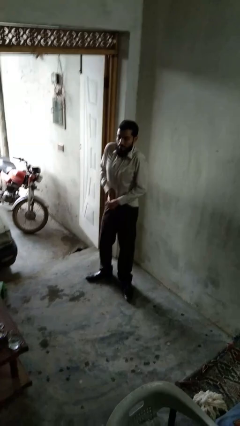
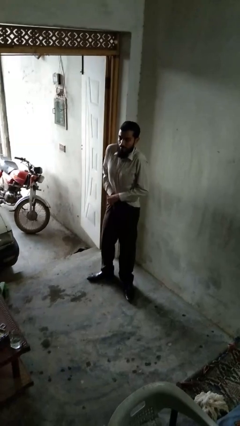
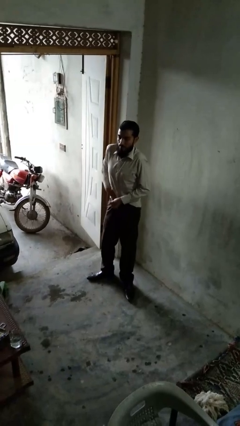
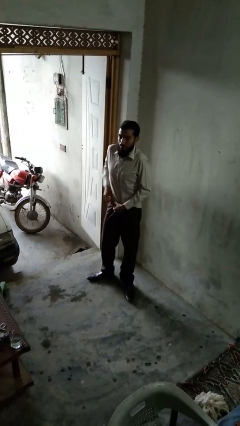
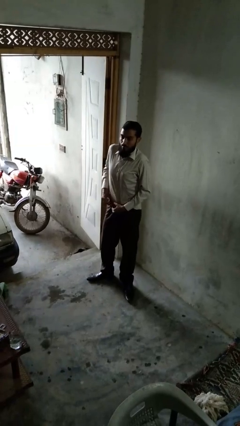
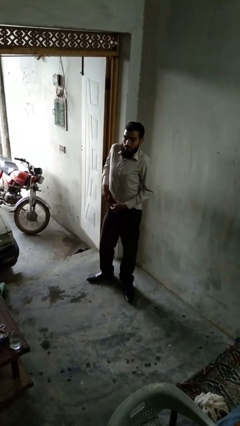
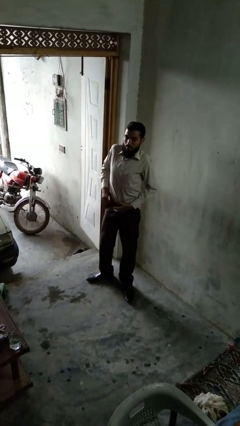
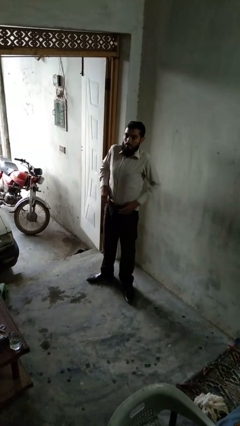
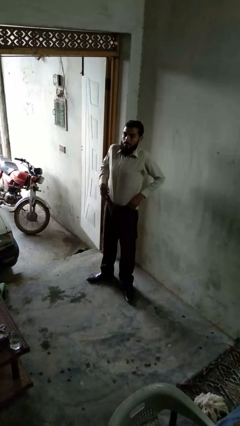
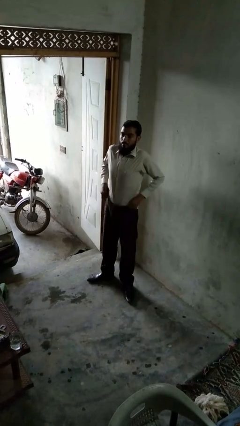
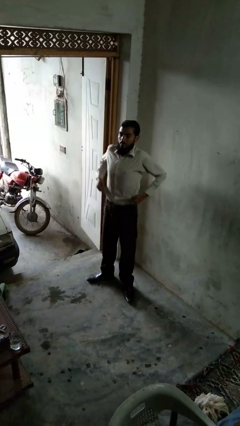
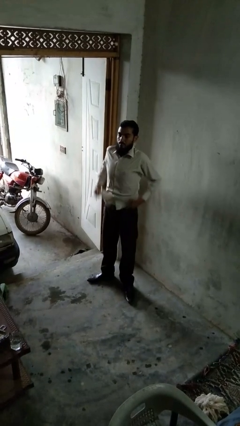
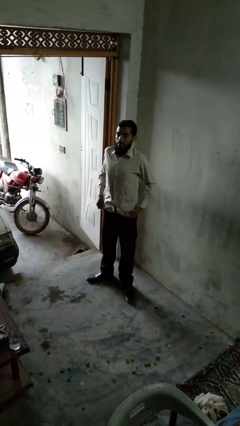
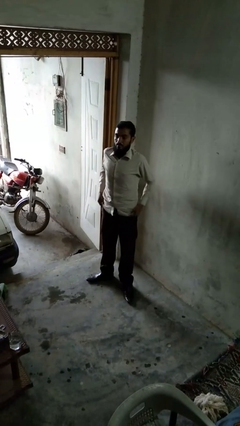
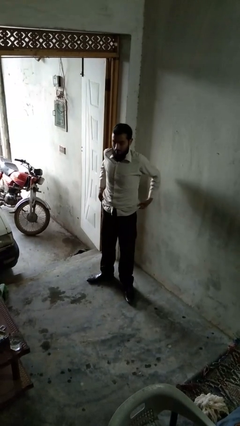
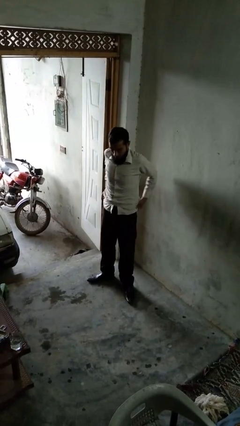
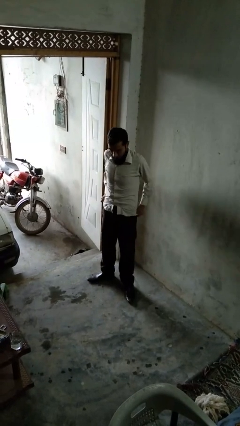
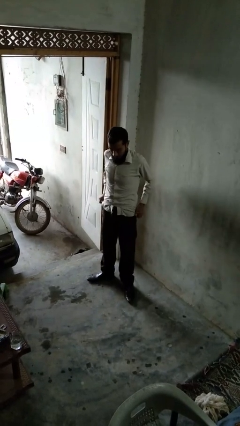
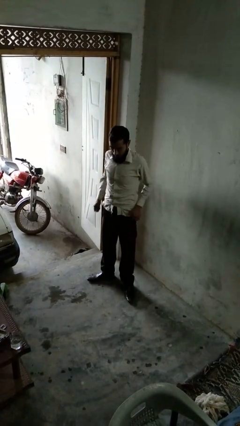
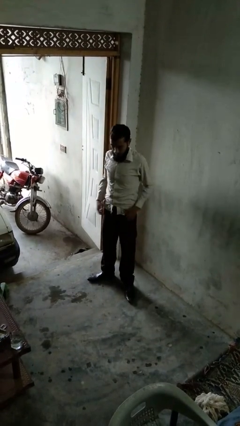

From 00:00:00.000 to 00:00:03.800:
person untucks shirt

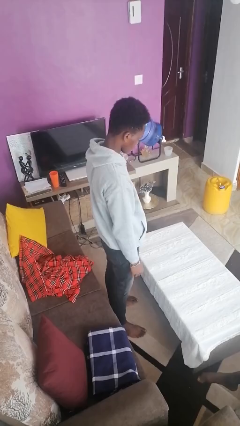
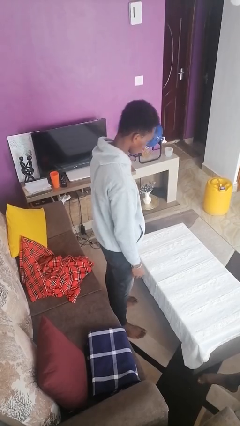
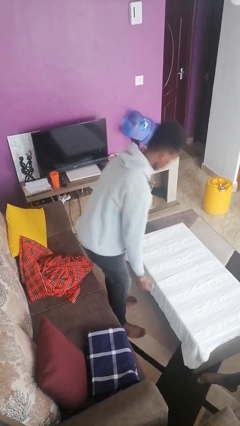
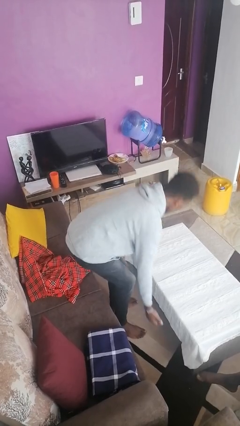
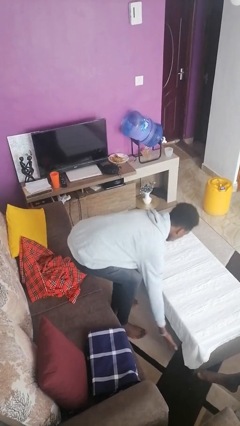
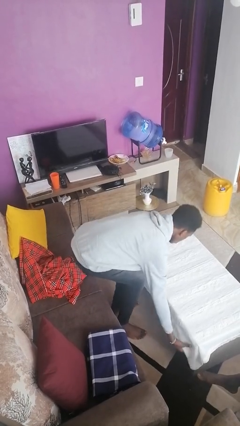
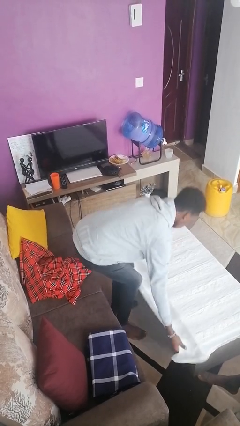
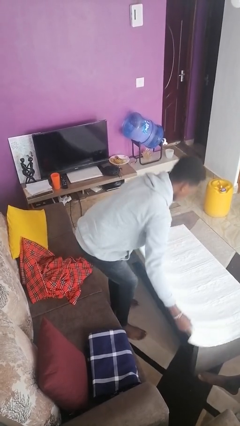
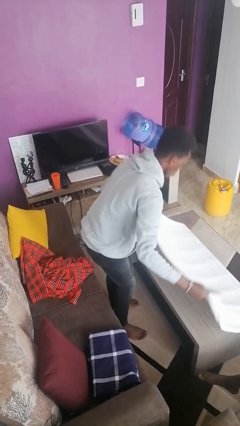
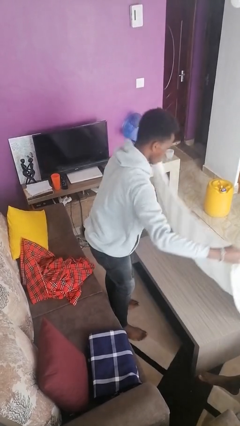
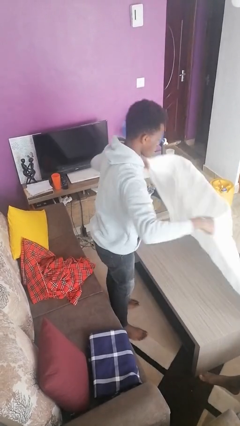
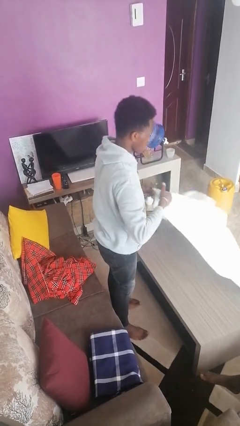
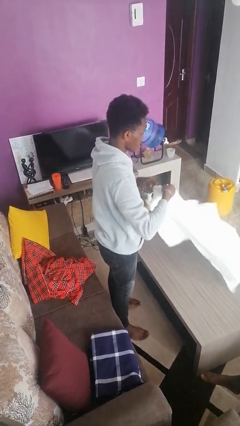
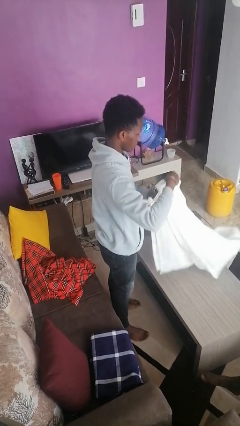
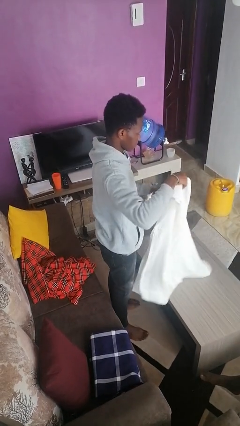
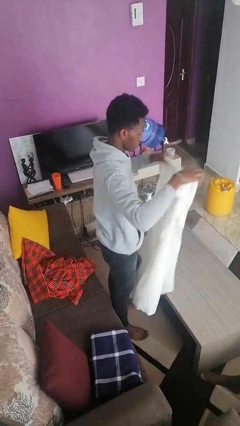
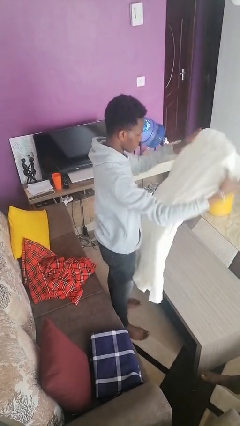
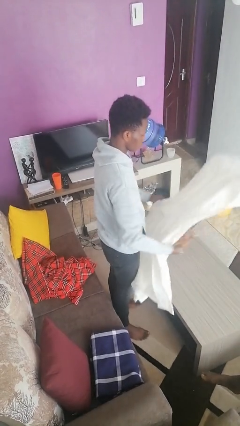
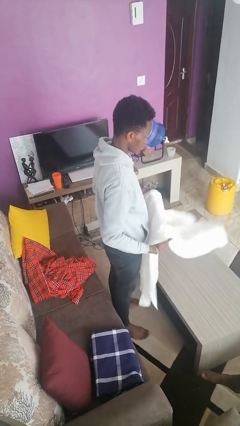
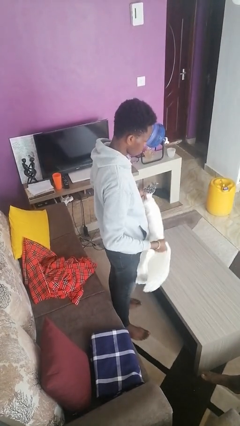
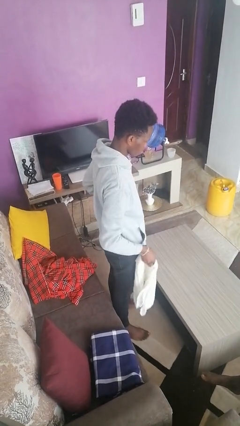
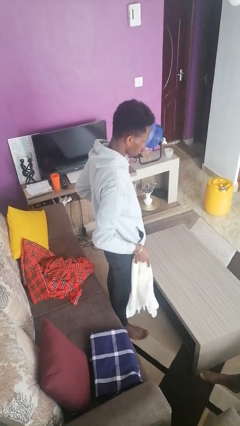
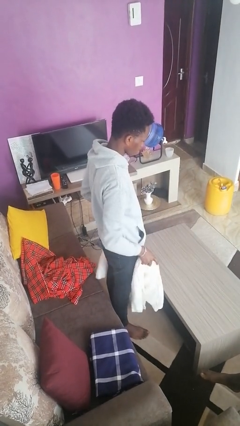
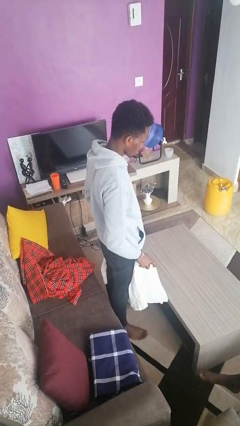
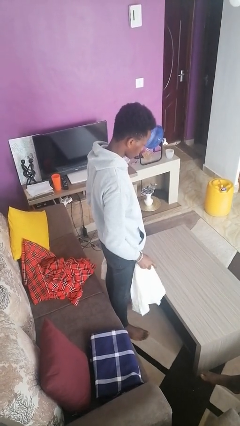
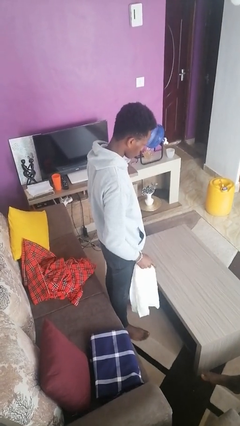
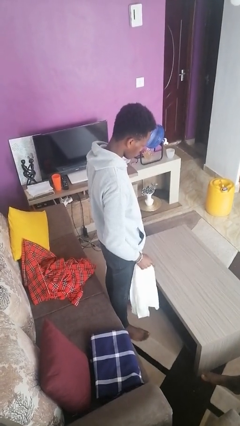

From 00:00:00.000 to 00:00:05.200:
person folds tablecloth

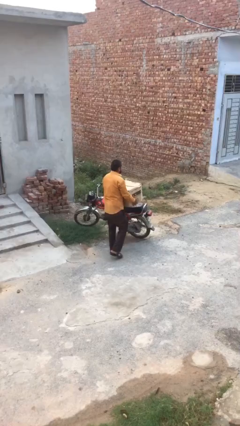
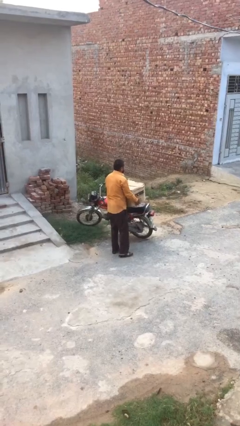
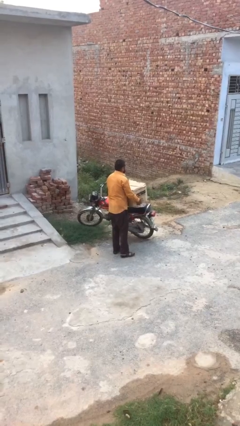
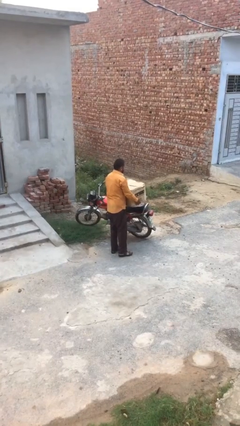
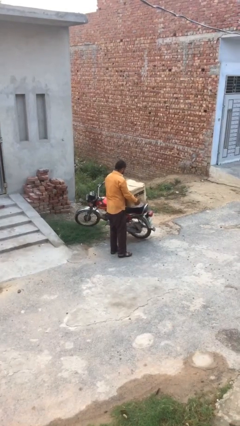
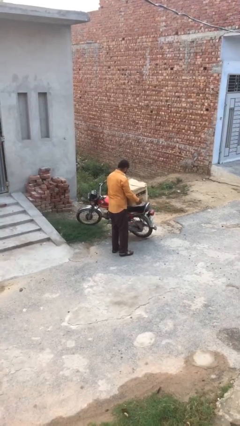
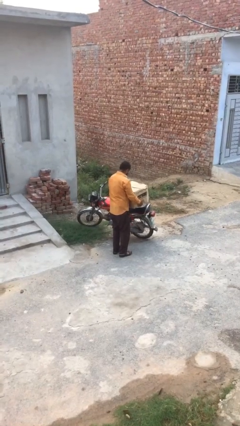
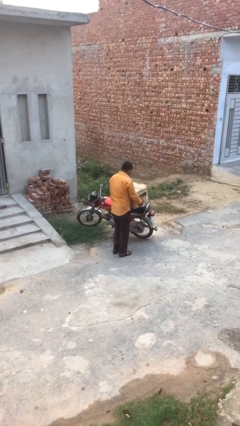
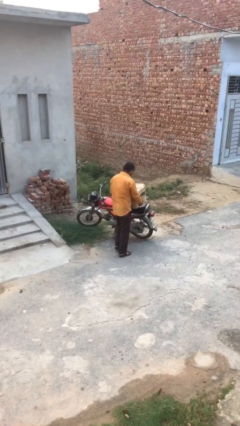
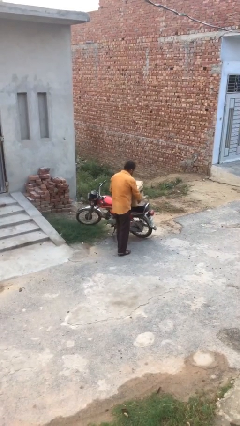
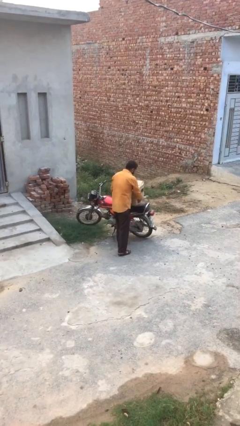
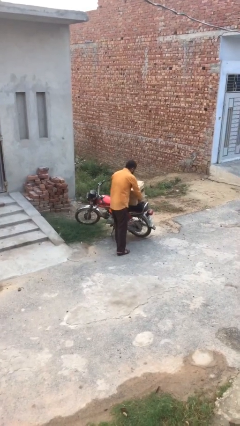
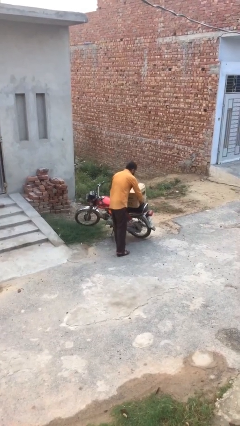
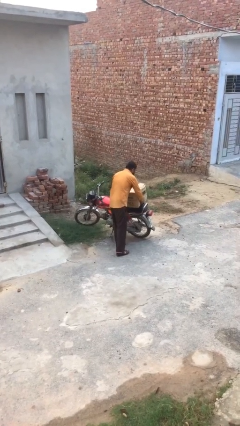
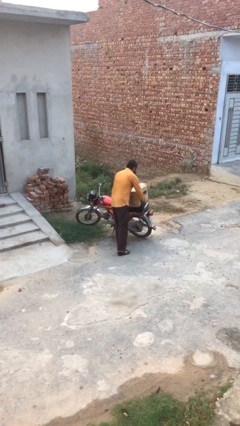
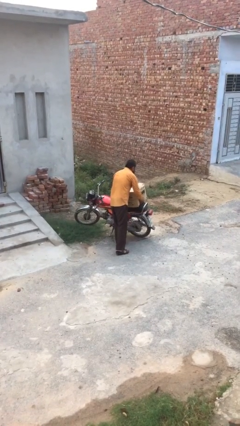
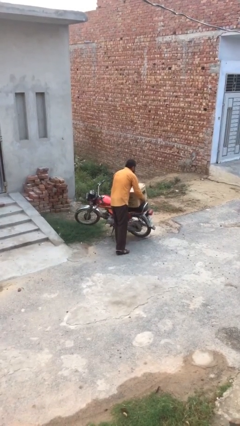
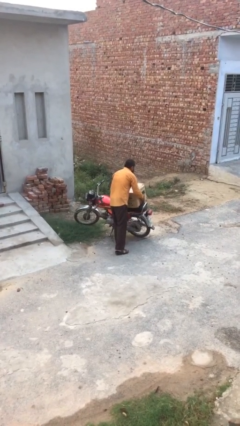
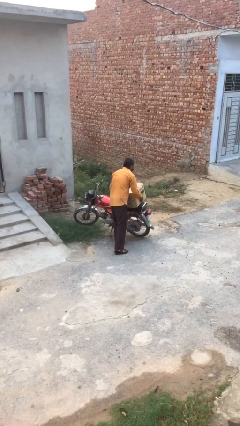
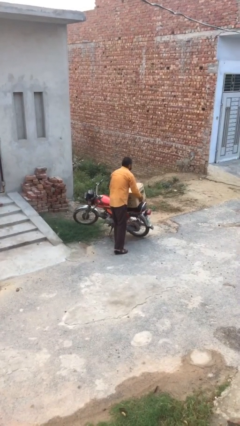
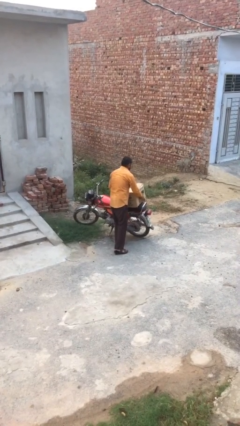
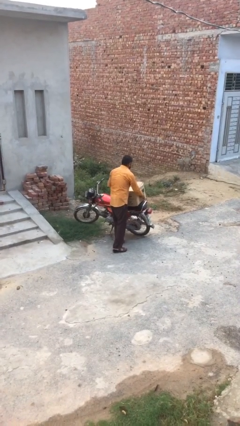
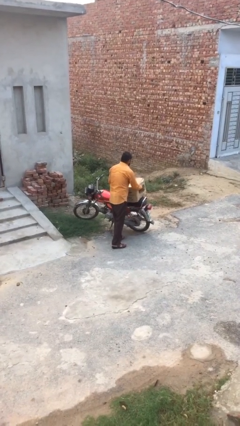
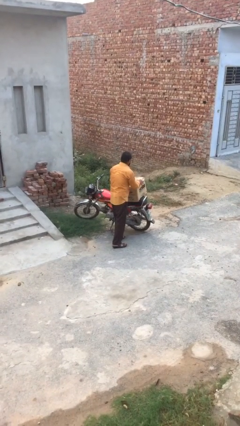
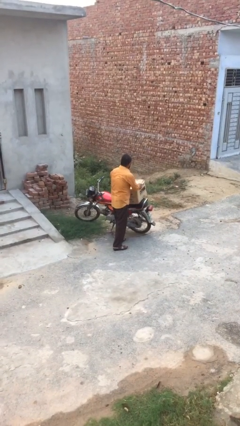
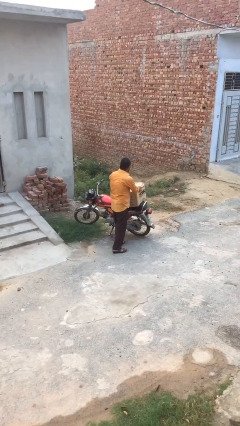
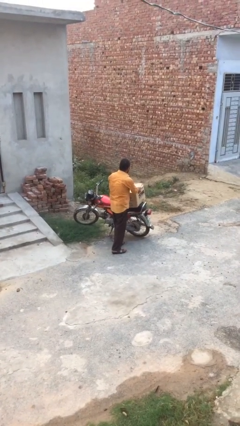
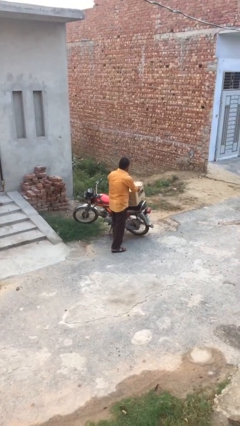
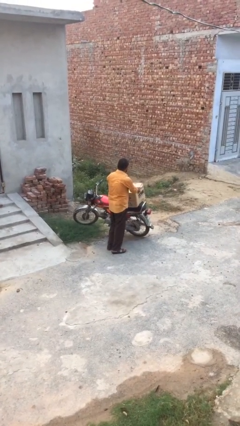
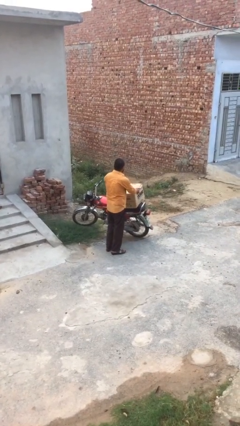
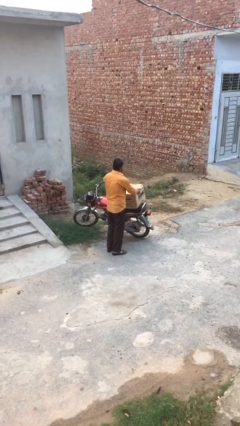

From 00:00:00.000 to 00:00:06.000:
person puts down object on floor

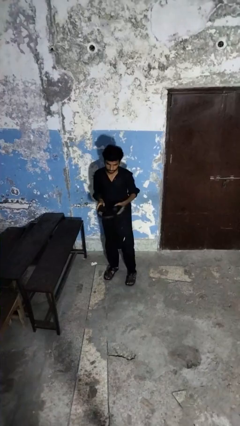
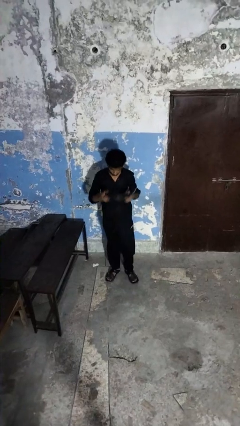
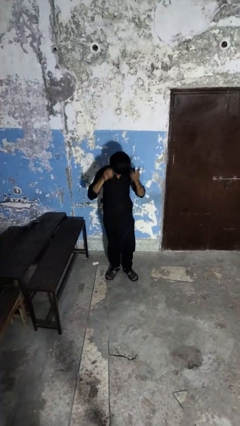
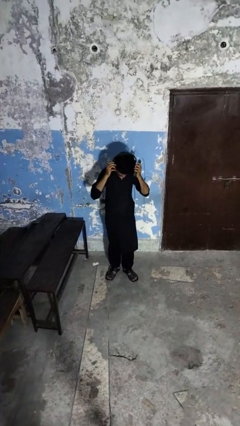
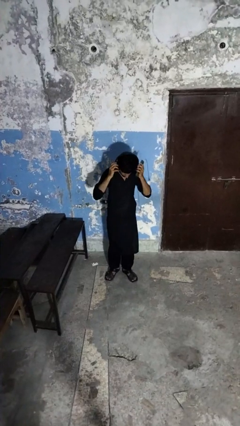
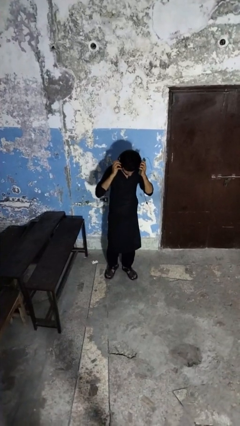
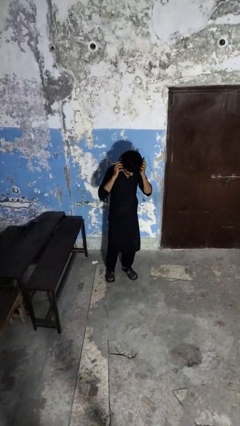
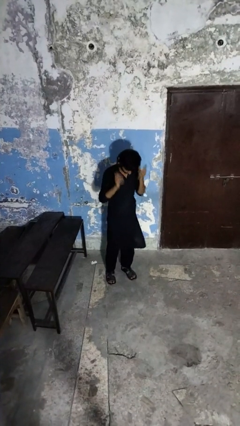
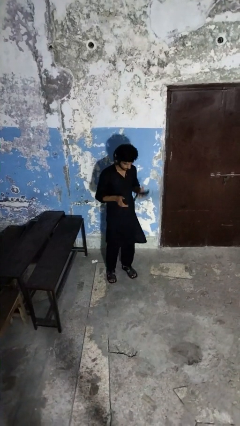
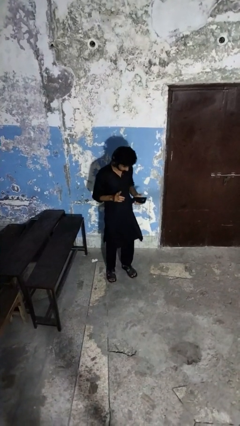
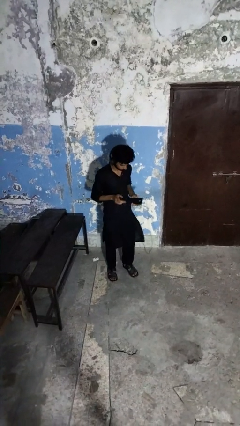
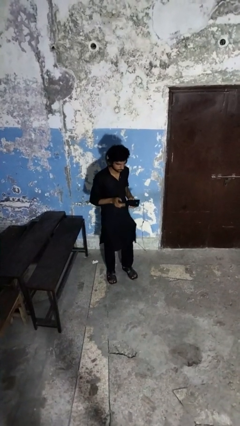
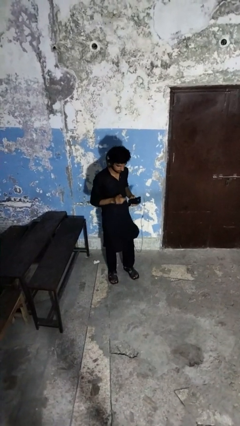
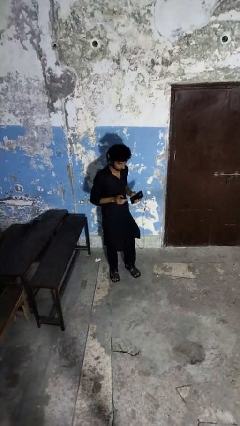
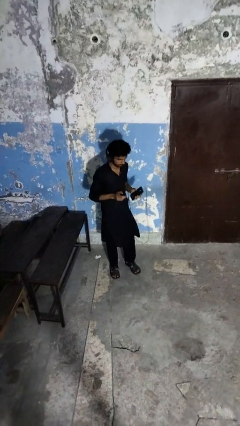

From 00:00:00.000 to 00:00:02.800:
person puts on headphones
